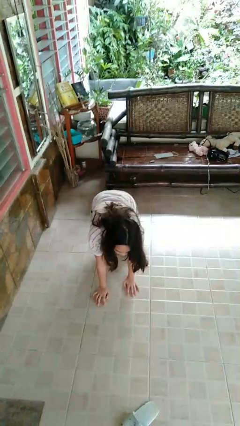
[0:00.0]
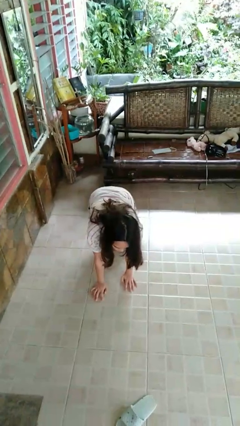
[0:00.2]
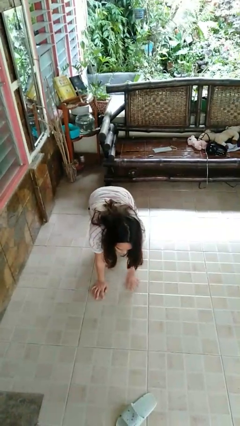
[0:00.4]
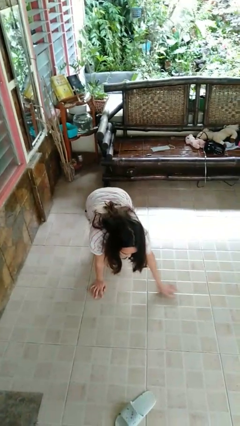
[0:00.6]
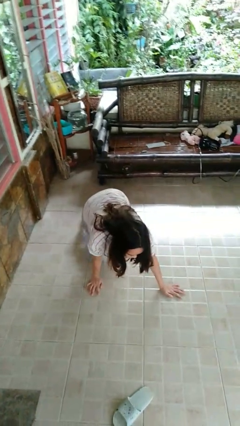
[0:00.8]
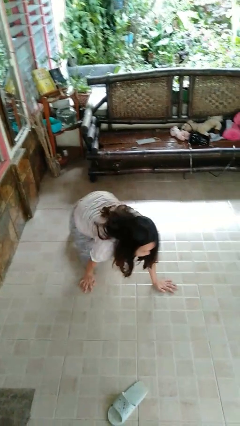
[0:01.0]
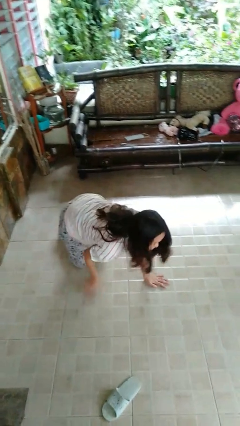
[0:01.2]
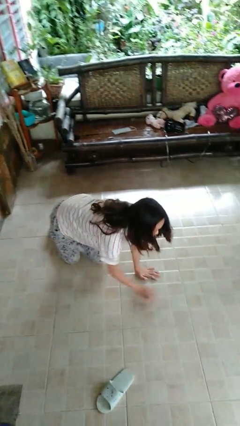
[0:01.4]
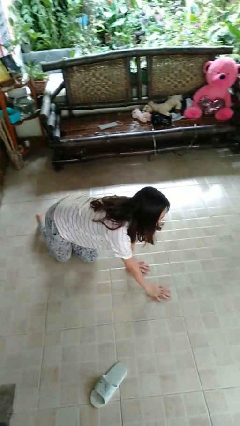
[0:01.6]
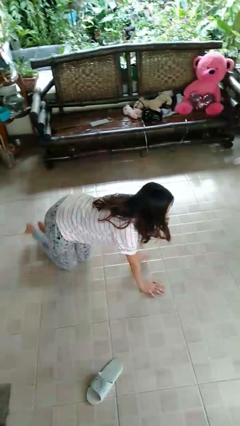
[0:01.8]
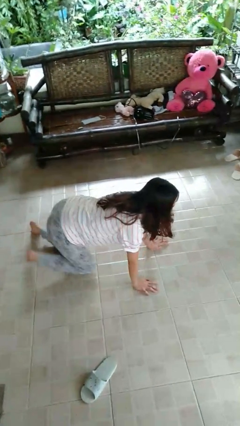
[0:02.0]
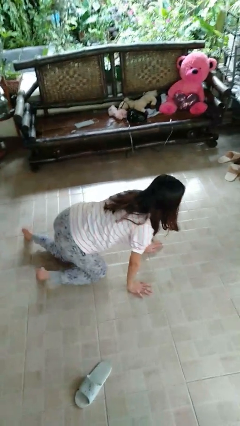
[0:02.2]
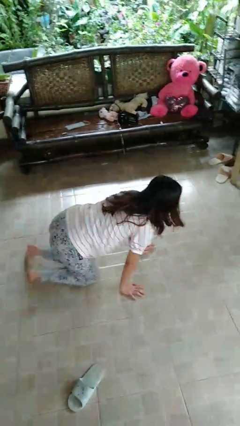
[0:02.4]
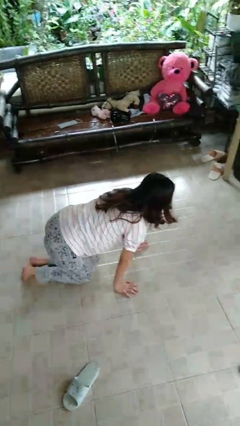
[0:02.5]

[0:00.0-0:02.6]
person crawls

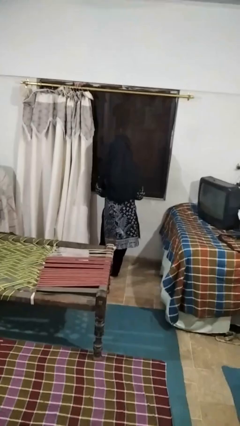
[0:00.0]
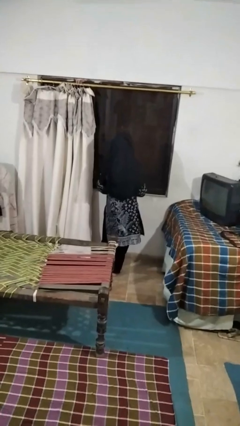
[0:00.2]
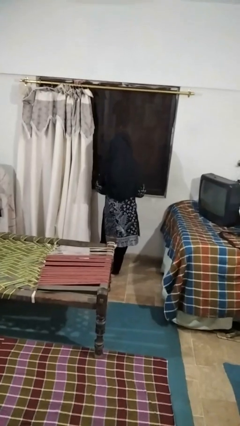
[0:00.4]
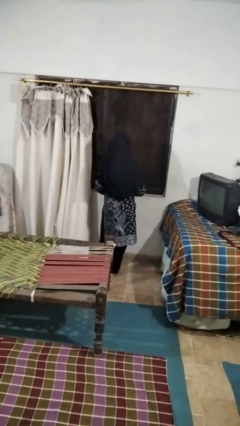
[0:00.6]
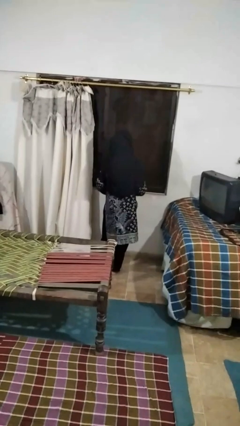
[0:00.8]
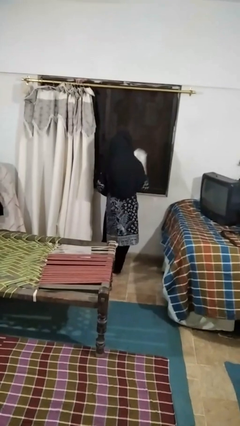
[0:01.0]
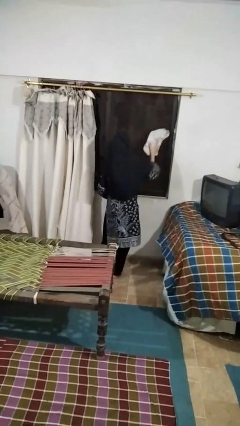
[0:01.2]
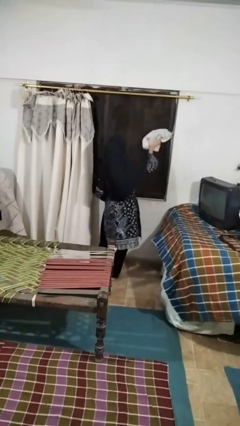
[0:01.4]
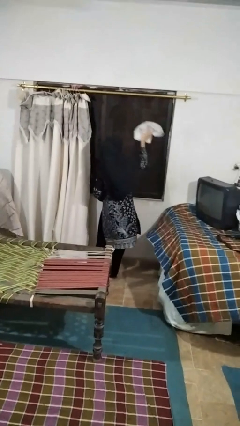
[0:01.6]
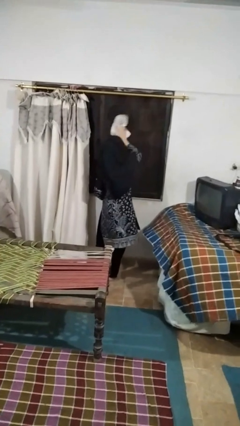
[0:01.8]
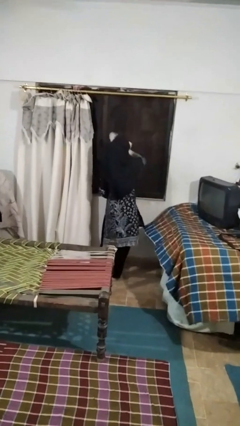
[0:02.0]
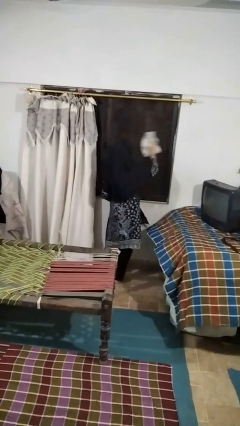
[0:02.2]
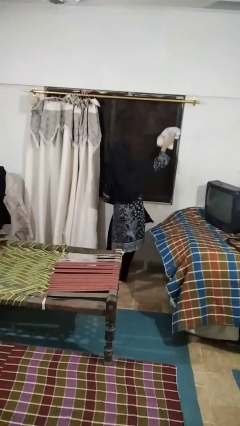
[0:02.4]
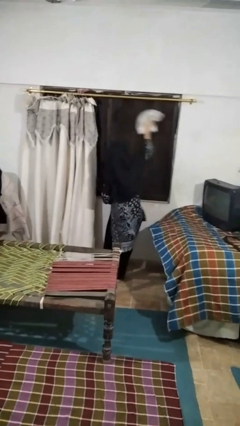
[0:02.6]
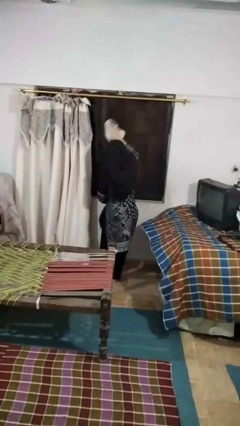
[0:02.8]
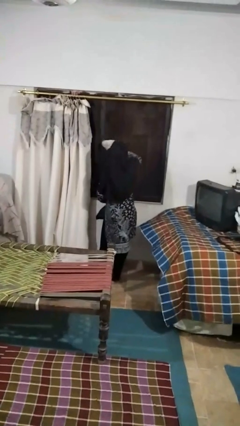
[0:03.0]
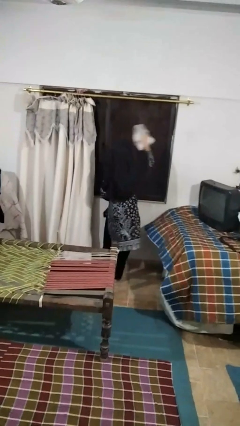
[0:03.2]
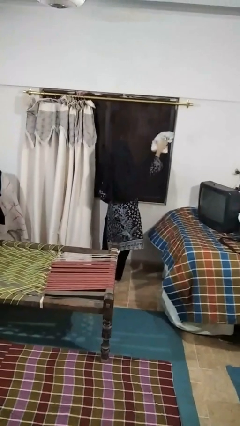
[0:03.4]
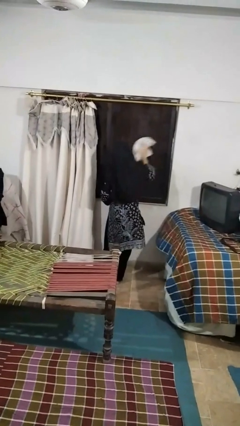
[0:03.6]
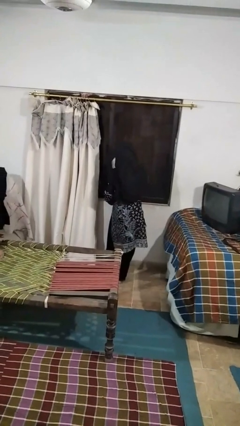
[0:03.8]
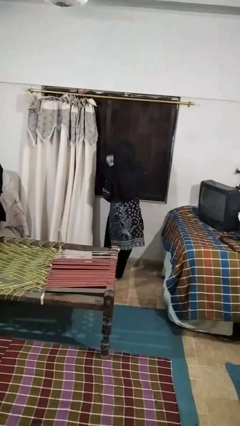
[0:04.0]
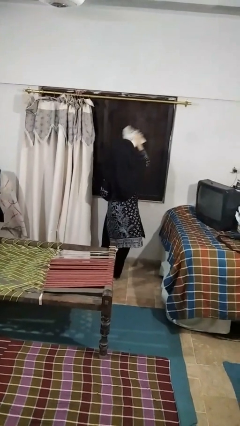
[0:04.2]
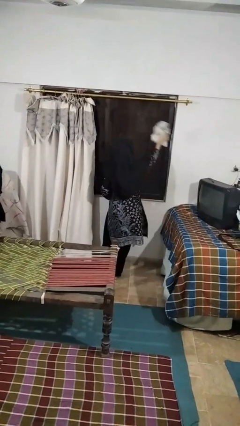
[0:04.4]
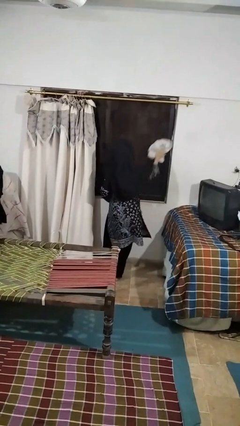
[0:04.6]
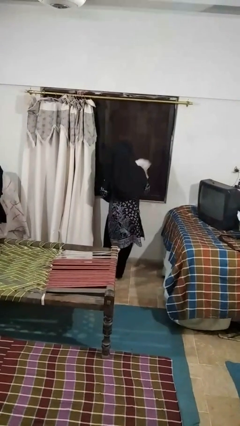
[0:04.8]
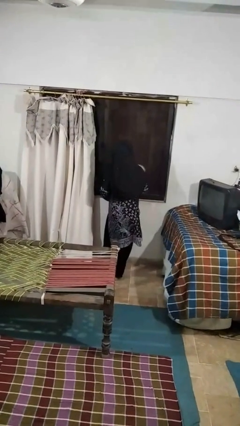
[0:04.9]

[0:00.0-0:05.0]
person washes window

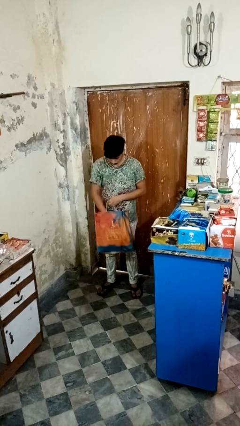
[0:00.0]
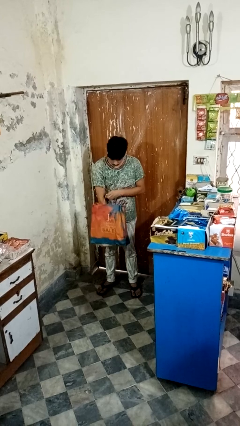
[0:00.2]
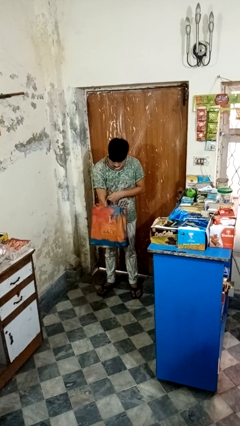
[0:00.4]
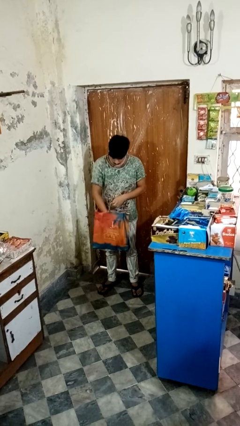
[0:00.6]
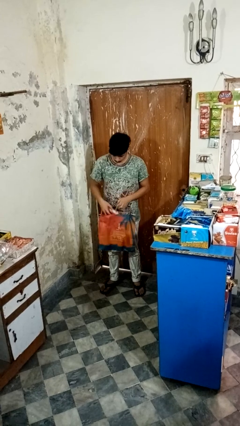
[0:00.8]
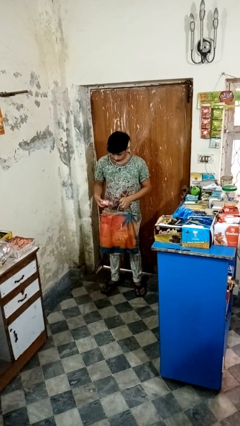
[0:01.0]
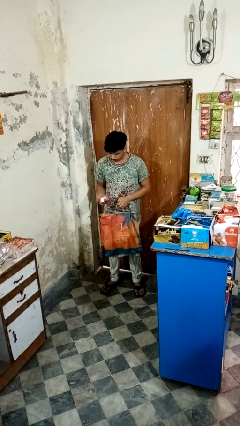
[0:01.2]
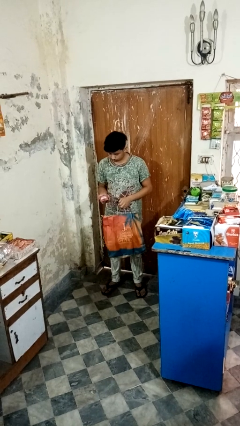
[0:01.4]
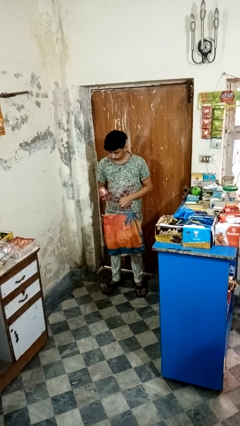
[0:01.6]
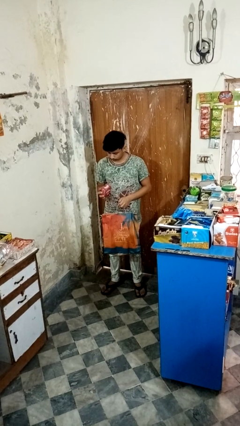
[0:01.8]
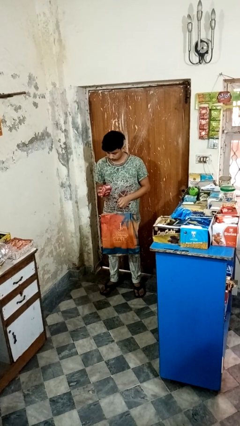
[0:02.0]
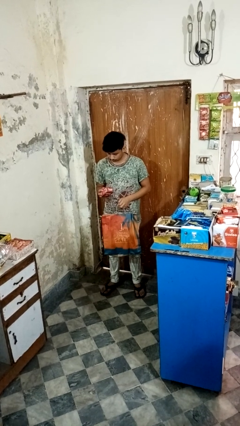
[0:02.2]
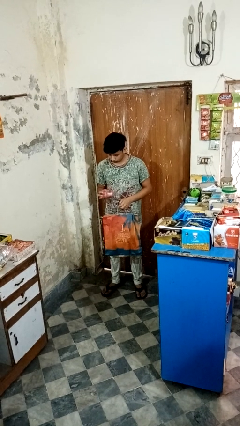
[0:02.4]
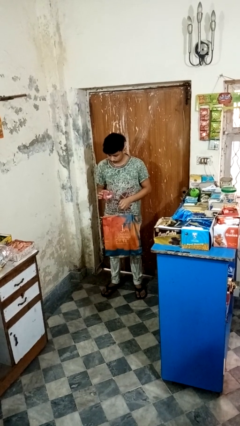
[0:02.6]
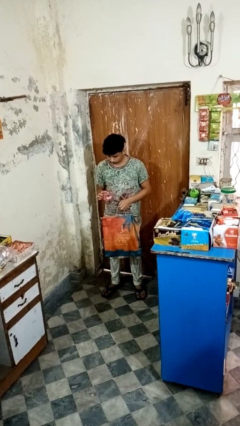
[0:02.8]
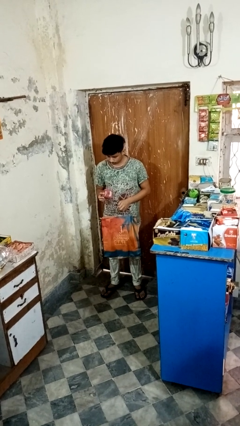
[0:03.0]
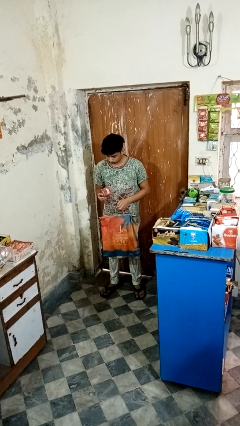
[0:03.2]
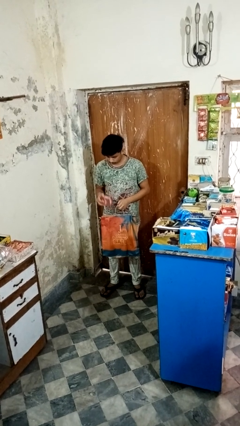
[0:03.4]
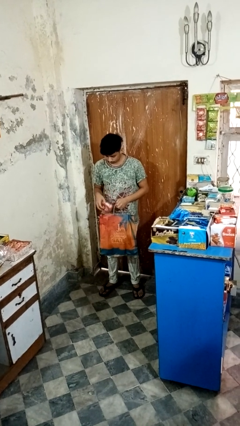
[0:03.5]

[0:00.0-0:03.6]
person takes object from bag

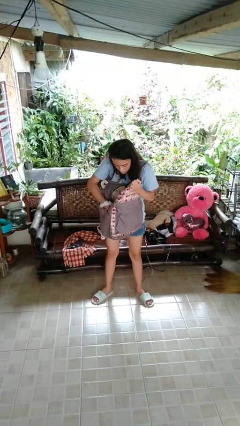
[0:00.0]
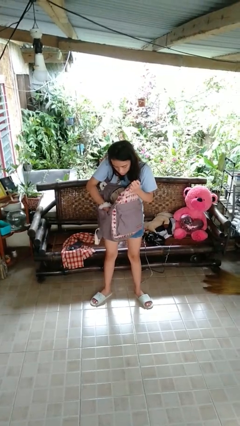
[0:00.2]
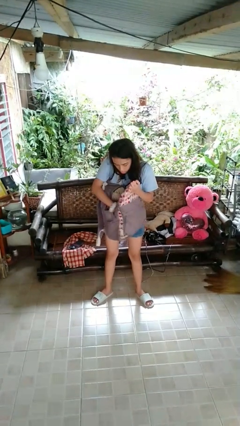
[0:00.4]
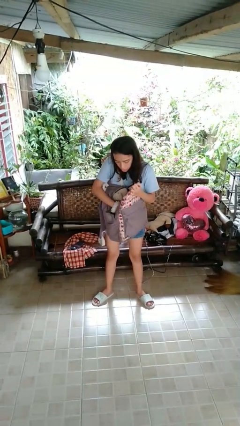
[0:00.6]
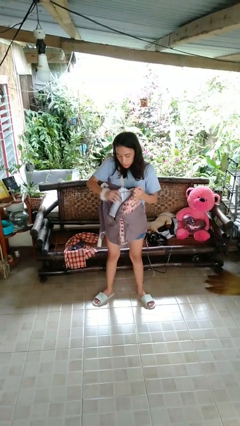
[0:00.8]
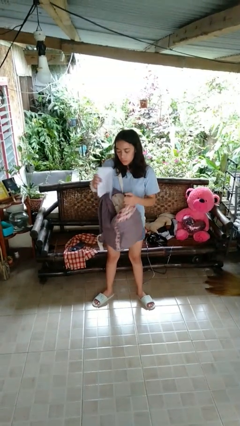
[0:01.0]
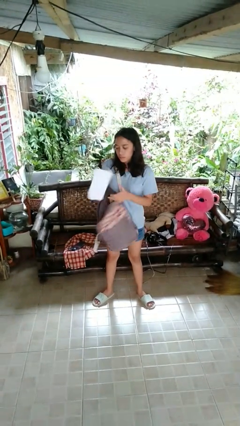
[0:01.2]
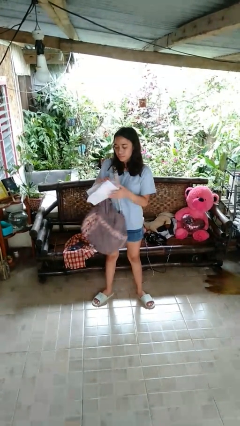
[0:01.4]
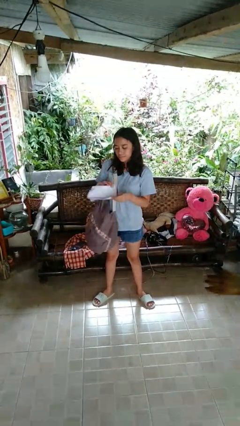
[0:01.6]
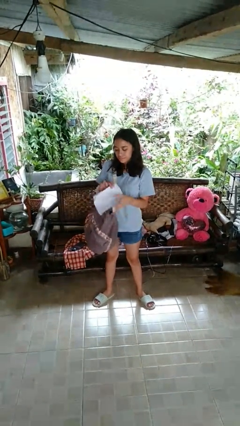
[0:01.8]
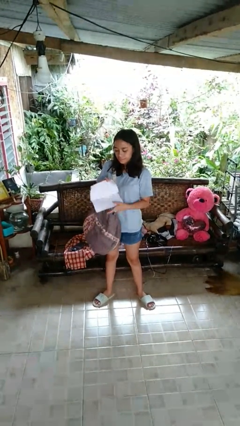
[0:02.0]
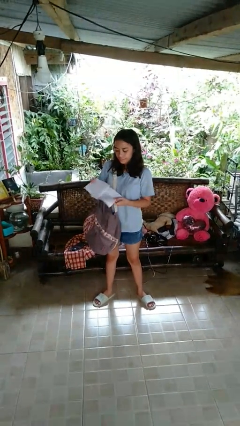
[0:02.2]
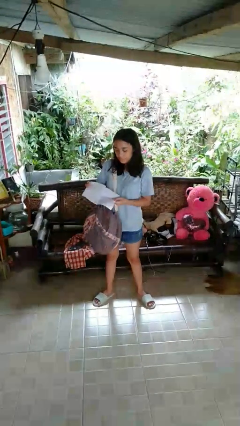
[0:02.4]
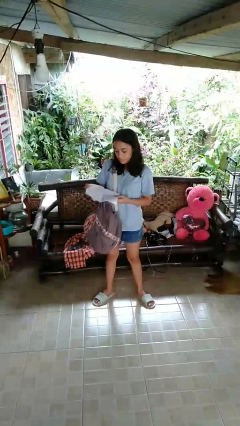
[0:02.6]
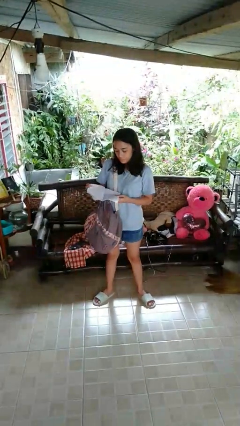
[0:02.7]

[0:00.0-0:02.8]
person takes object from backpack

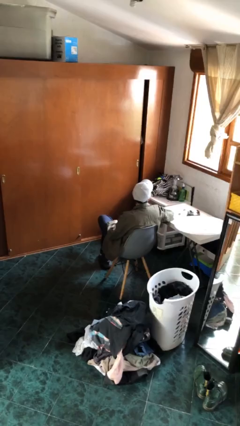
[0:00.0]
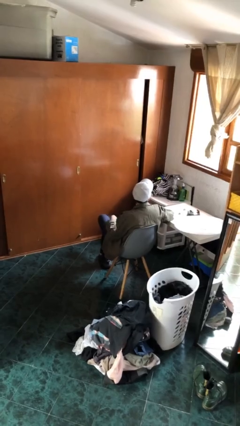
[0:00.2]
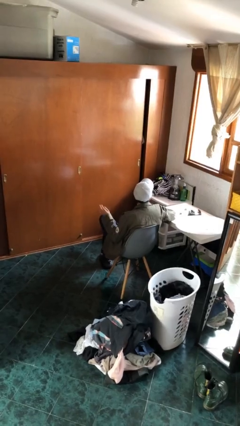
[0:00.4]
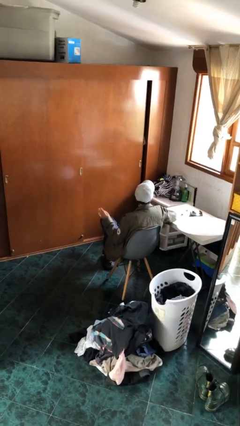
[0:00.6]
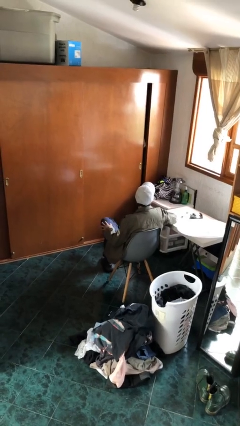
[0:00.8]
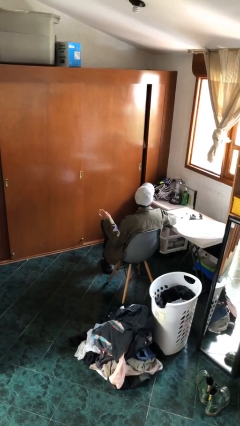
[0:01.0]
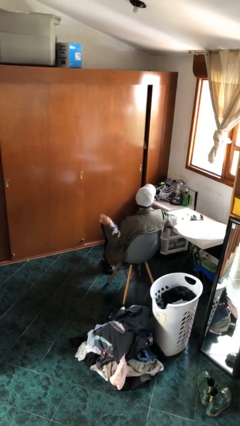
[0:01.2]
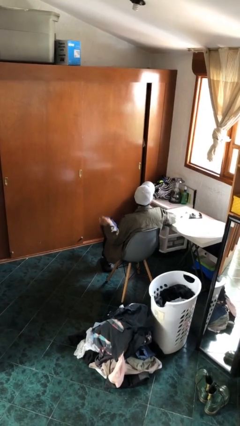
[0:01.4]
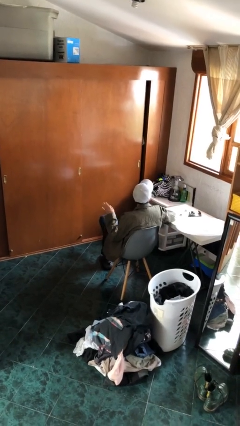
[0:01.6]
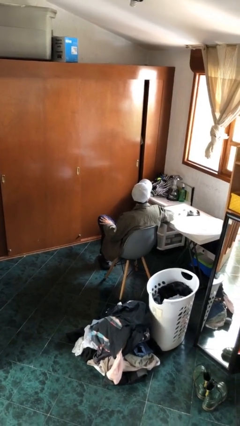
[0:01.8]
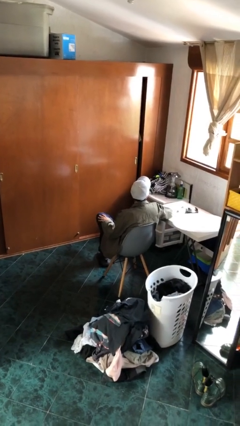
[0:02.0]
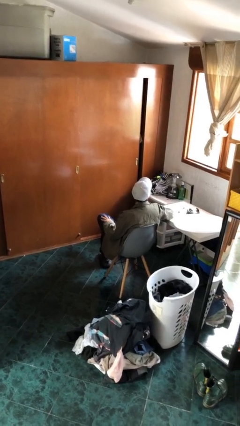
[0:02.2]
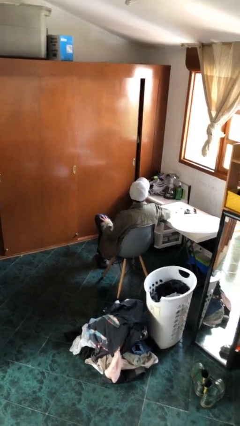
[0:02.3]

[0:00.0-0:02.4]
person slaps hands on thighs

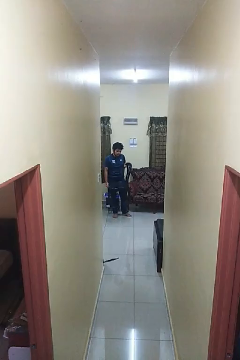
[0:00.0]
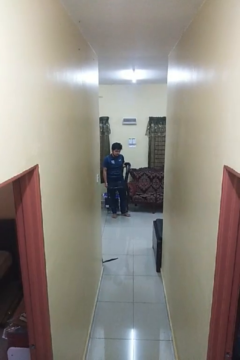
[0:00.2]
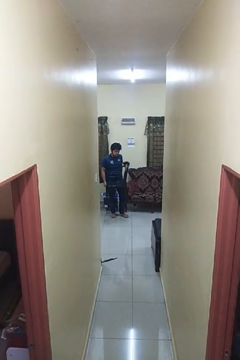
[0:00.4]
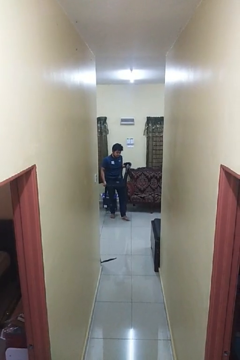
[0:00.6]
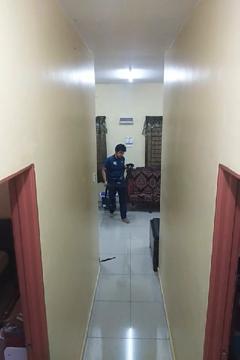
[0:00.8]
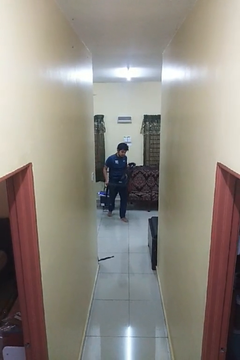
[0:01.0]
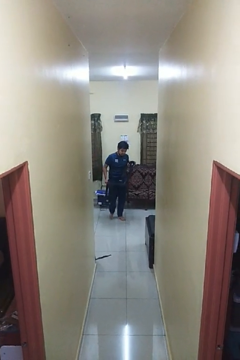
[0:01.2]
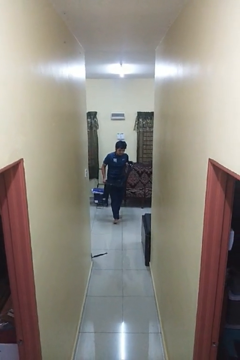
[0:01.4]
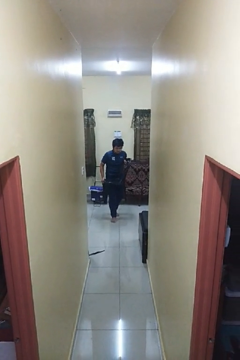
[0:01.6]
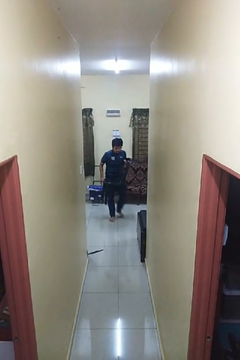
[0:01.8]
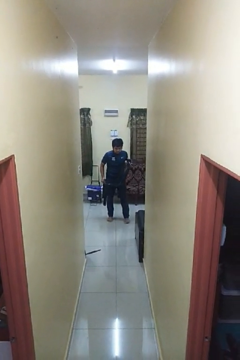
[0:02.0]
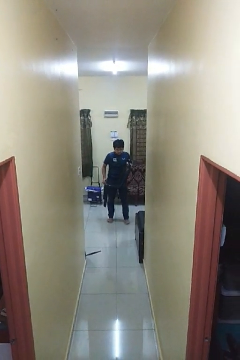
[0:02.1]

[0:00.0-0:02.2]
person carries furniture
